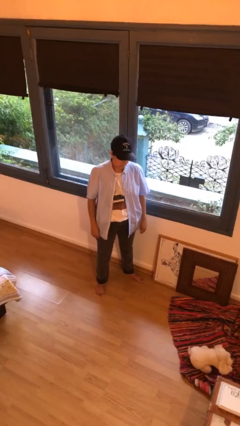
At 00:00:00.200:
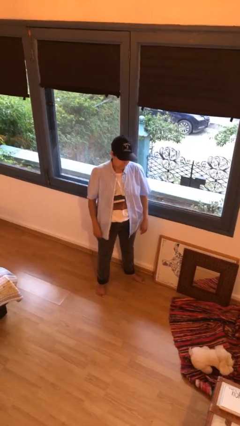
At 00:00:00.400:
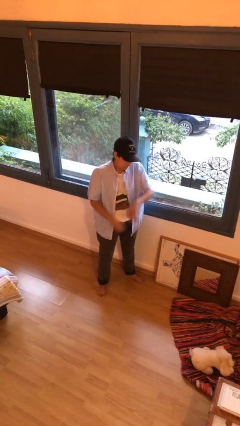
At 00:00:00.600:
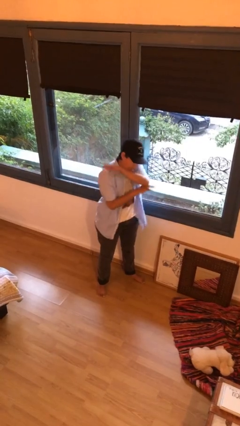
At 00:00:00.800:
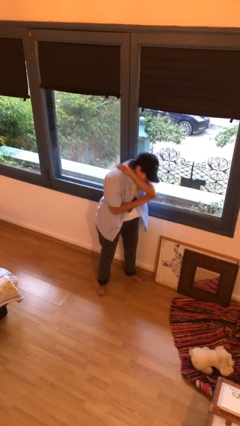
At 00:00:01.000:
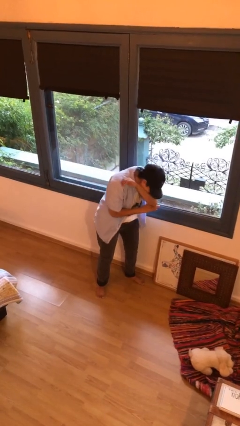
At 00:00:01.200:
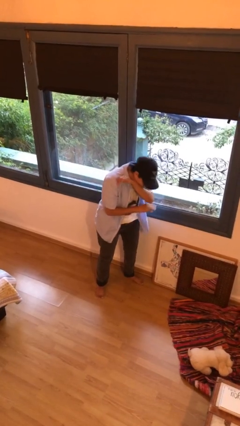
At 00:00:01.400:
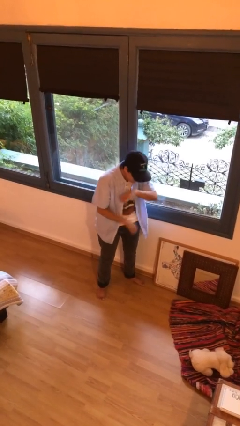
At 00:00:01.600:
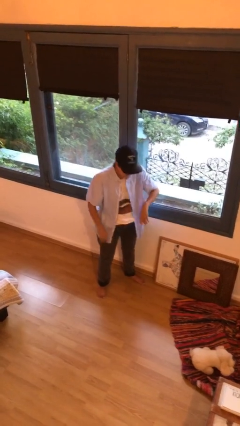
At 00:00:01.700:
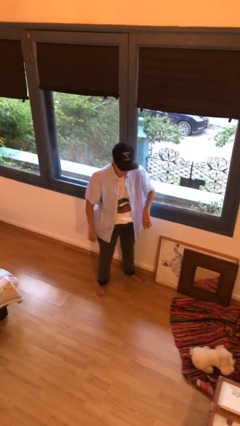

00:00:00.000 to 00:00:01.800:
person sneezes into arm

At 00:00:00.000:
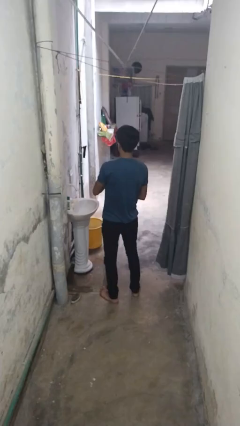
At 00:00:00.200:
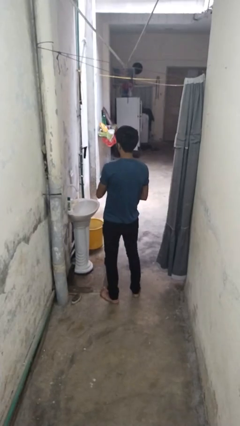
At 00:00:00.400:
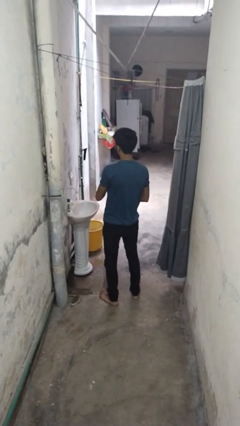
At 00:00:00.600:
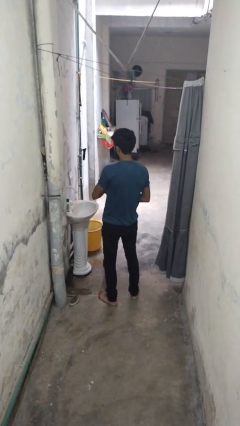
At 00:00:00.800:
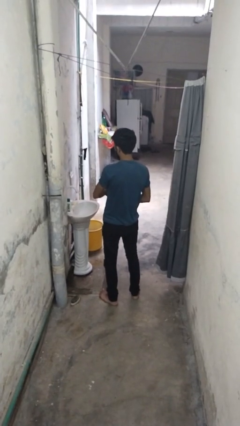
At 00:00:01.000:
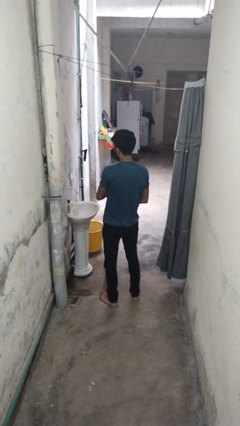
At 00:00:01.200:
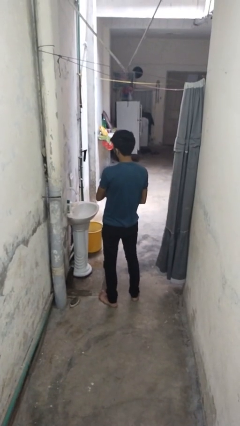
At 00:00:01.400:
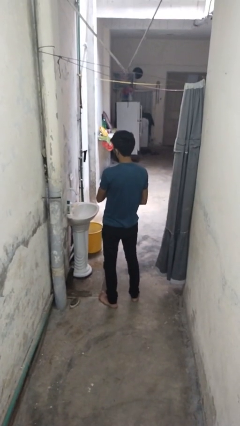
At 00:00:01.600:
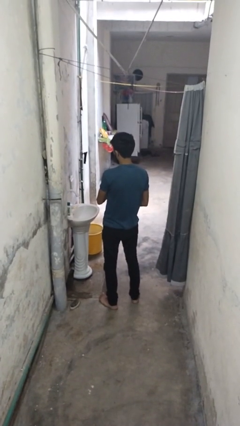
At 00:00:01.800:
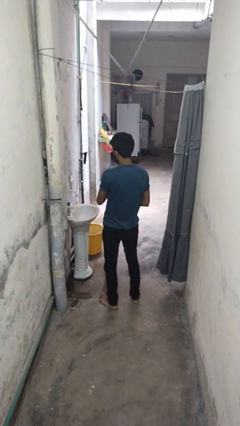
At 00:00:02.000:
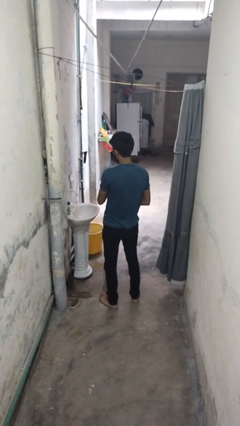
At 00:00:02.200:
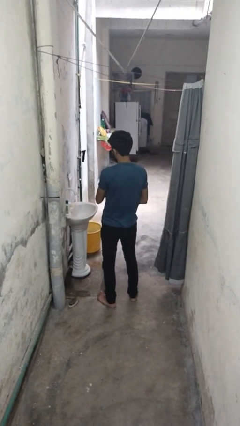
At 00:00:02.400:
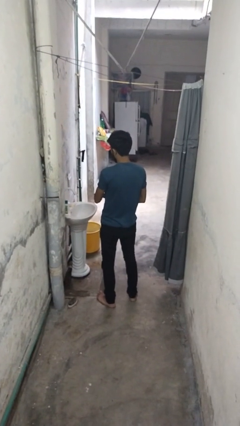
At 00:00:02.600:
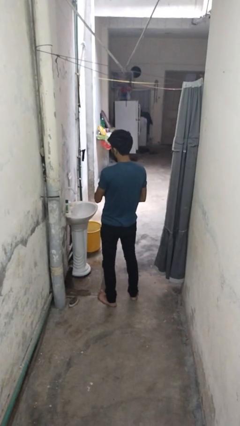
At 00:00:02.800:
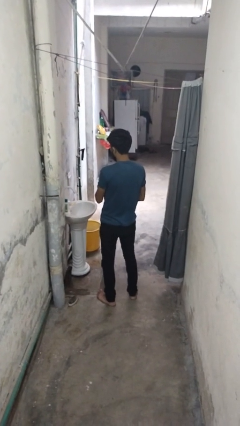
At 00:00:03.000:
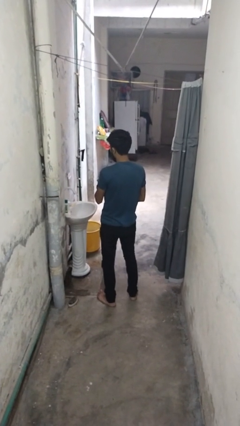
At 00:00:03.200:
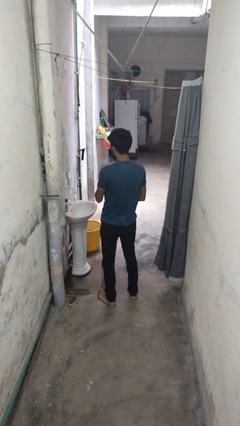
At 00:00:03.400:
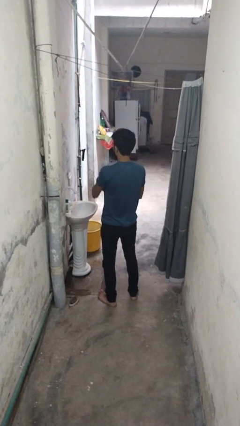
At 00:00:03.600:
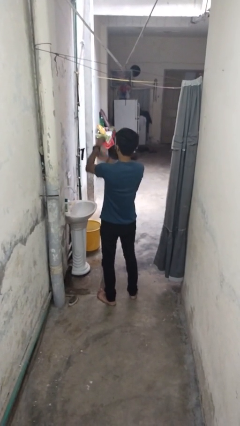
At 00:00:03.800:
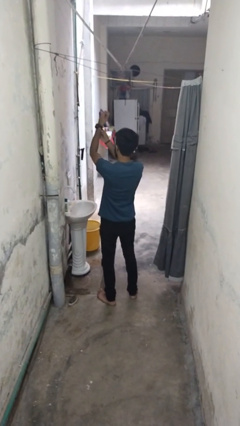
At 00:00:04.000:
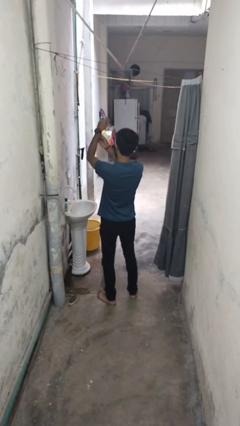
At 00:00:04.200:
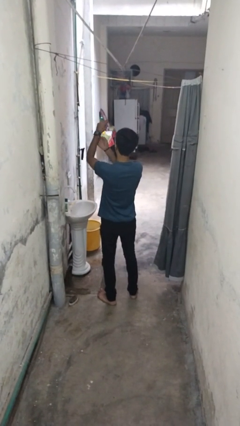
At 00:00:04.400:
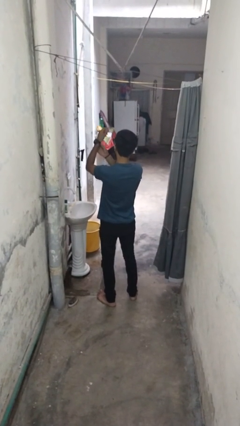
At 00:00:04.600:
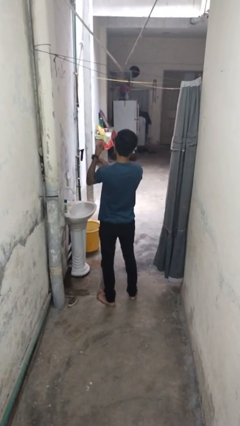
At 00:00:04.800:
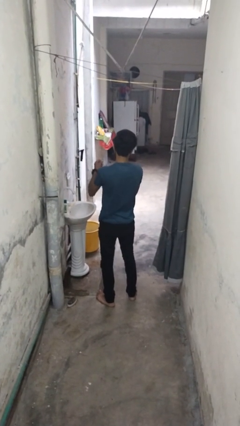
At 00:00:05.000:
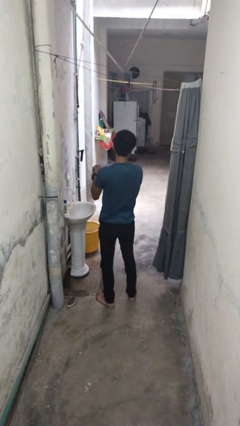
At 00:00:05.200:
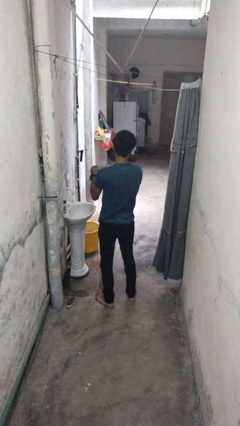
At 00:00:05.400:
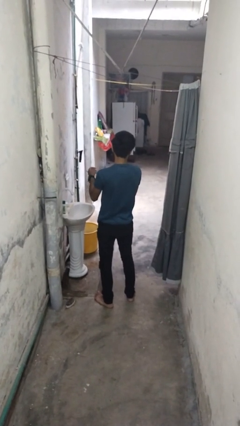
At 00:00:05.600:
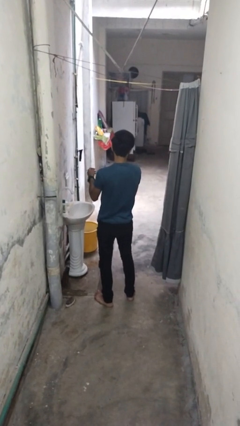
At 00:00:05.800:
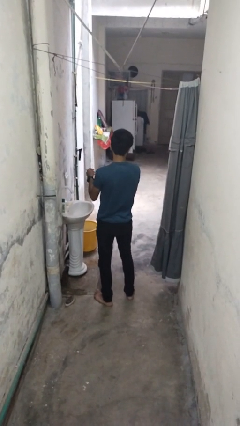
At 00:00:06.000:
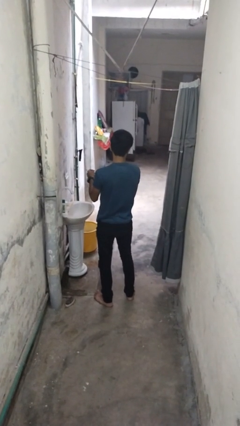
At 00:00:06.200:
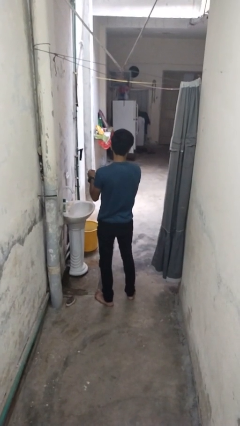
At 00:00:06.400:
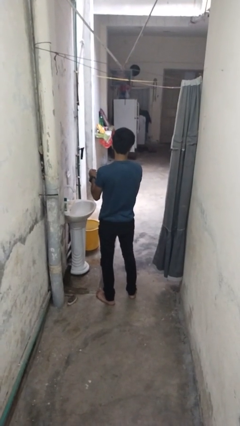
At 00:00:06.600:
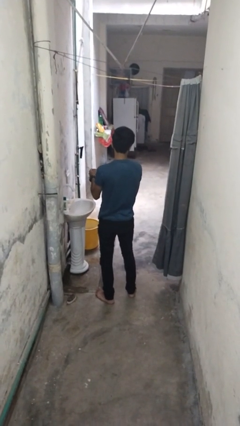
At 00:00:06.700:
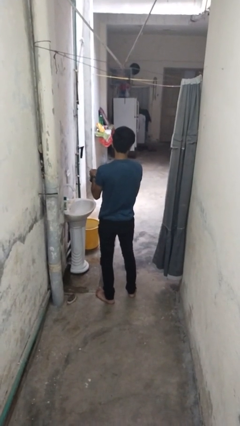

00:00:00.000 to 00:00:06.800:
person puts on wristwatch

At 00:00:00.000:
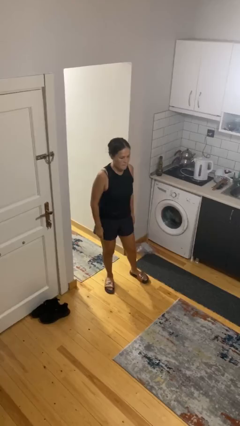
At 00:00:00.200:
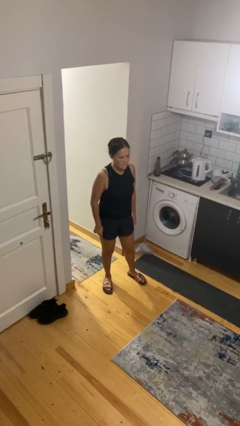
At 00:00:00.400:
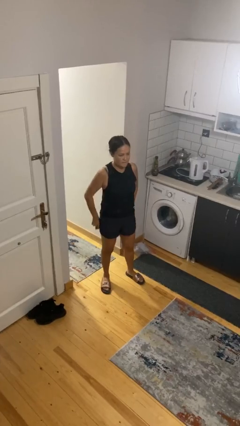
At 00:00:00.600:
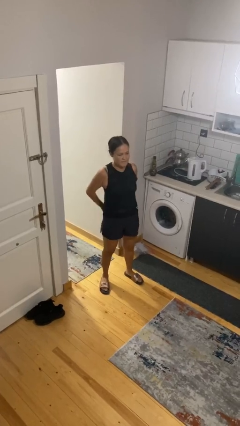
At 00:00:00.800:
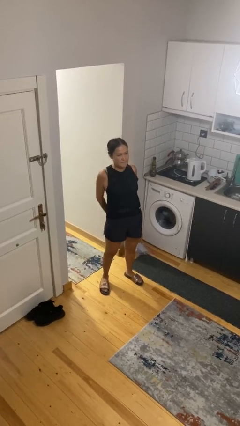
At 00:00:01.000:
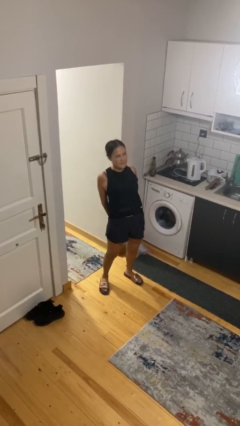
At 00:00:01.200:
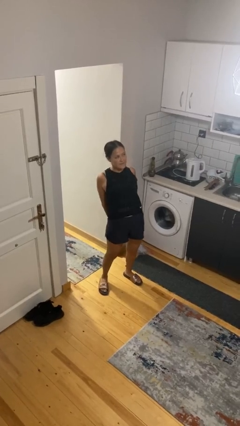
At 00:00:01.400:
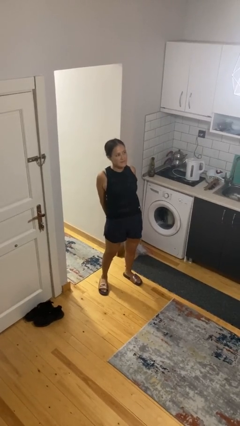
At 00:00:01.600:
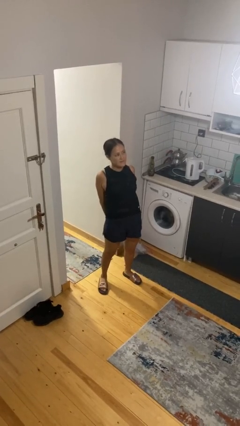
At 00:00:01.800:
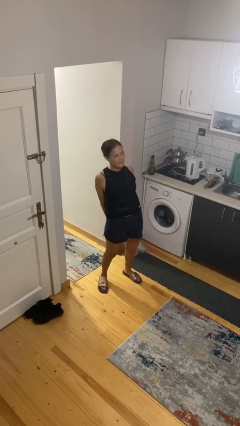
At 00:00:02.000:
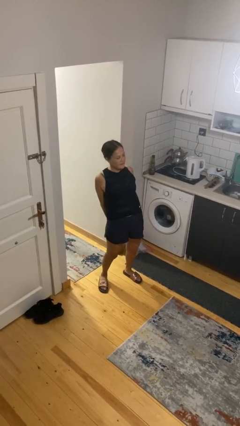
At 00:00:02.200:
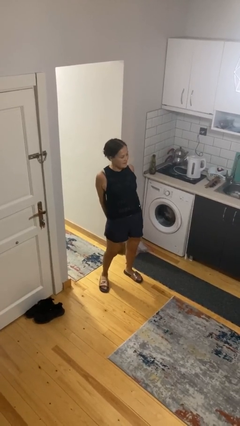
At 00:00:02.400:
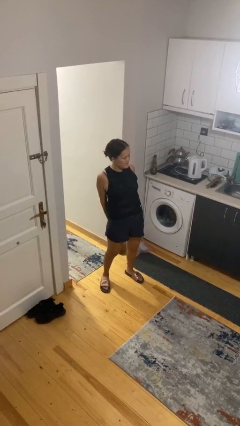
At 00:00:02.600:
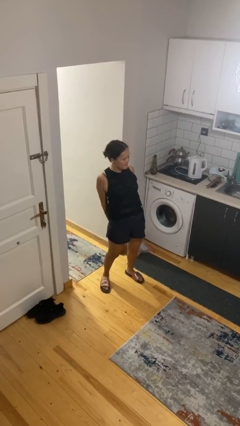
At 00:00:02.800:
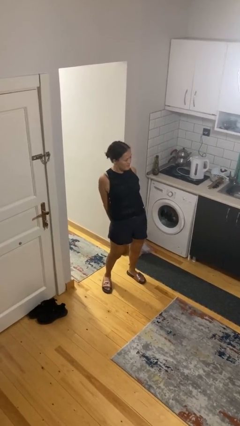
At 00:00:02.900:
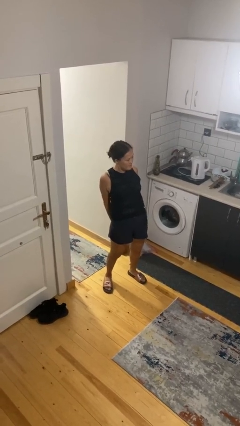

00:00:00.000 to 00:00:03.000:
person stretches back

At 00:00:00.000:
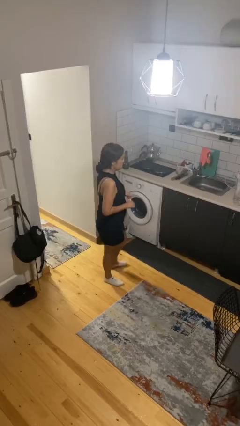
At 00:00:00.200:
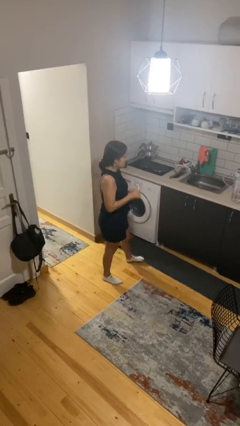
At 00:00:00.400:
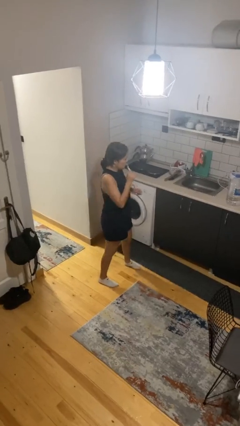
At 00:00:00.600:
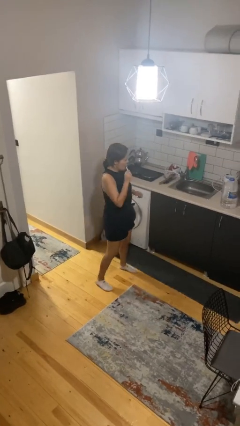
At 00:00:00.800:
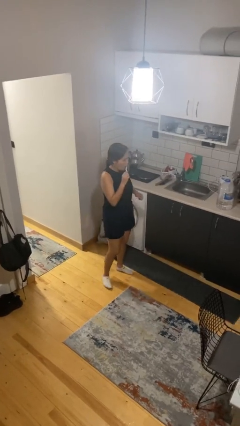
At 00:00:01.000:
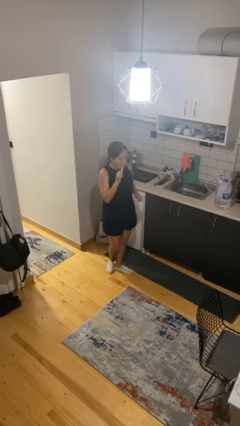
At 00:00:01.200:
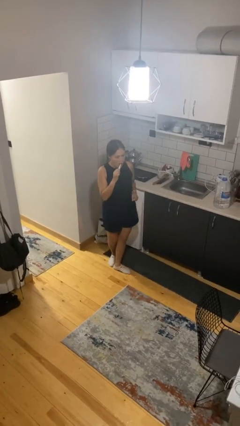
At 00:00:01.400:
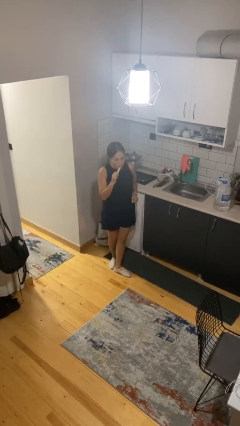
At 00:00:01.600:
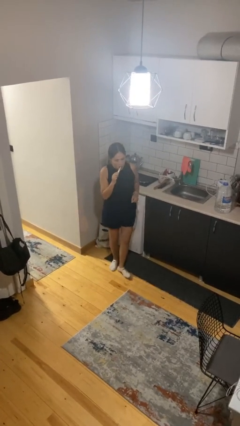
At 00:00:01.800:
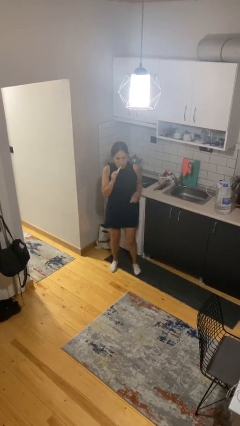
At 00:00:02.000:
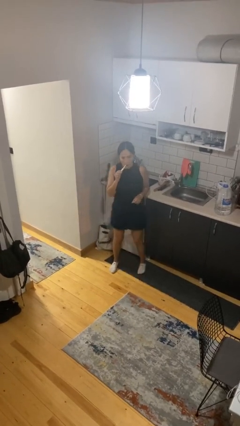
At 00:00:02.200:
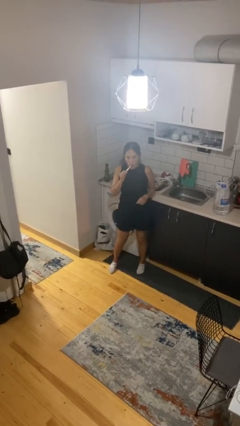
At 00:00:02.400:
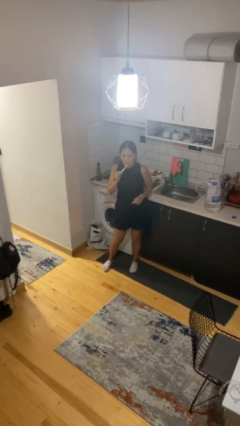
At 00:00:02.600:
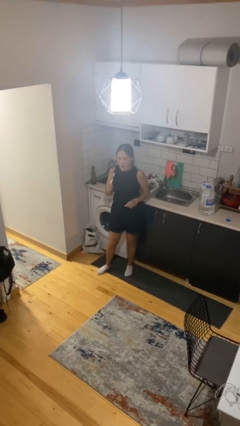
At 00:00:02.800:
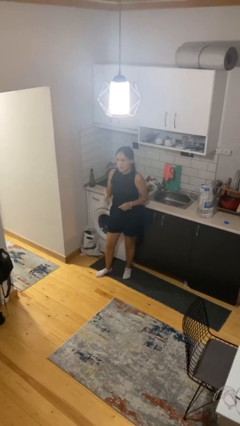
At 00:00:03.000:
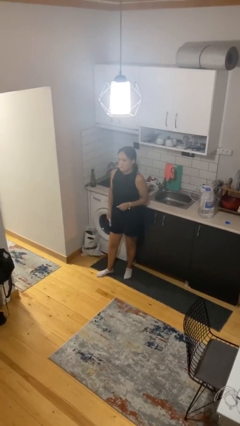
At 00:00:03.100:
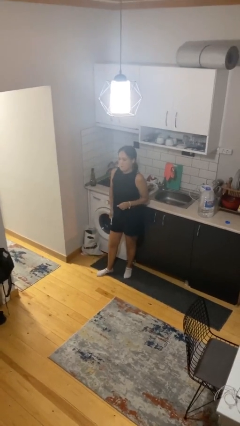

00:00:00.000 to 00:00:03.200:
person brushes teeth

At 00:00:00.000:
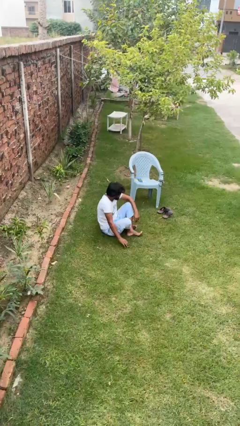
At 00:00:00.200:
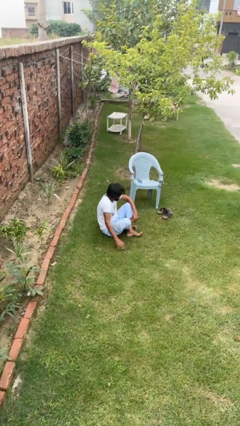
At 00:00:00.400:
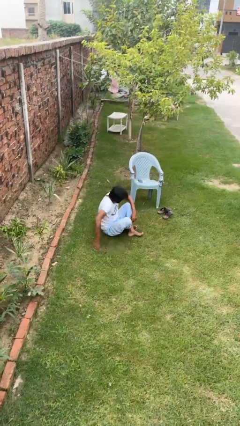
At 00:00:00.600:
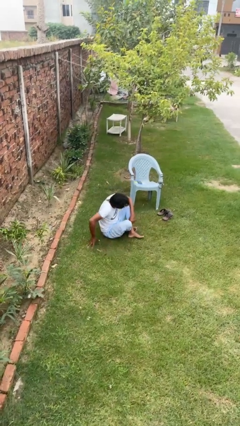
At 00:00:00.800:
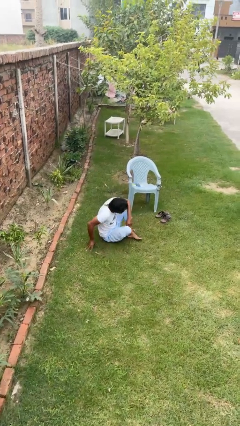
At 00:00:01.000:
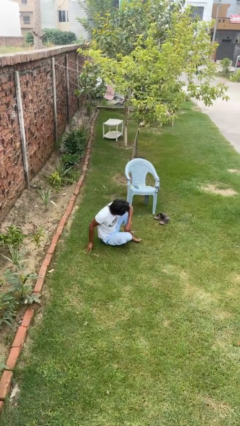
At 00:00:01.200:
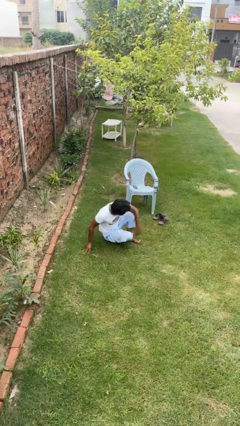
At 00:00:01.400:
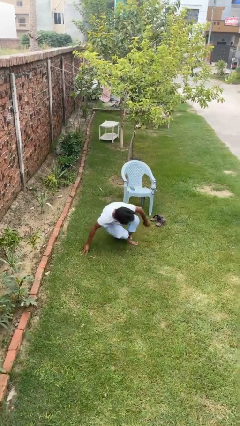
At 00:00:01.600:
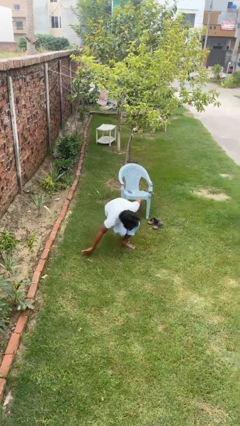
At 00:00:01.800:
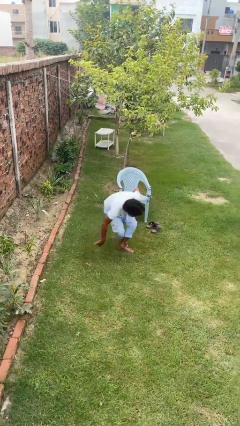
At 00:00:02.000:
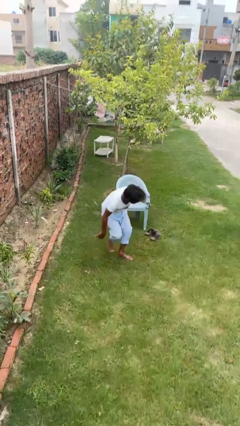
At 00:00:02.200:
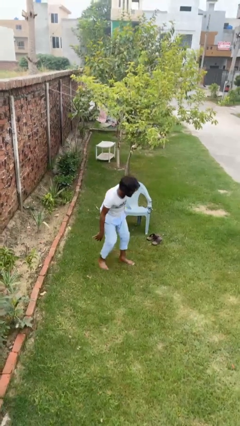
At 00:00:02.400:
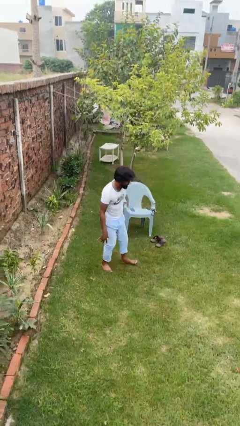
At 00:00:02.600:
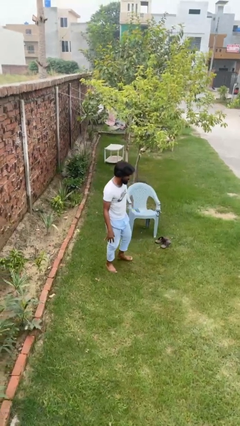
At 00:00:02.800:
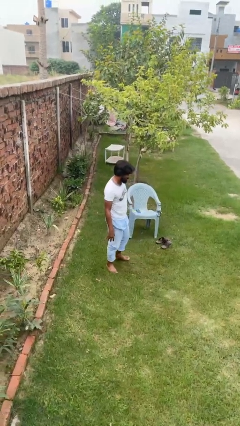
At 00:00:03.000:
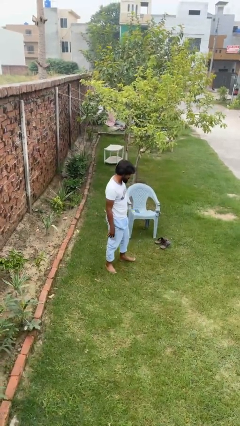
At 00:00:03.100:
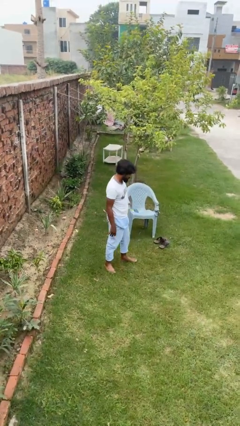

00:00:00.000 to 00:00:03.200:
person stands up from floor
